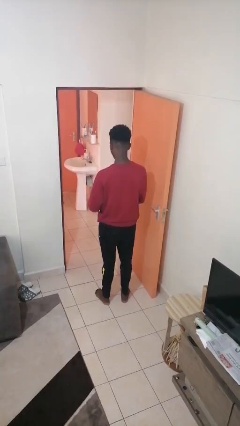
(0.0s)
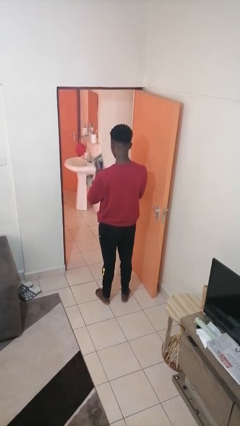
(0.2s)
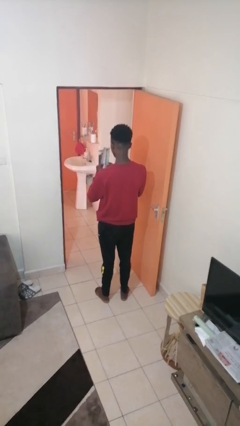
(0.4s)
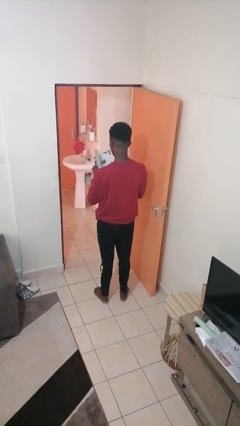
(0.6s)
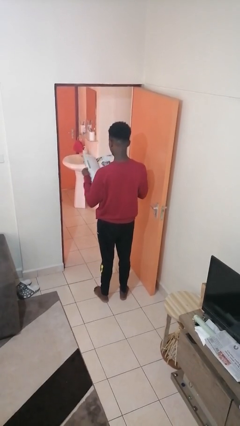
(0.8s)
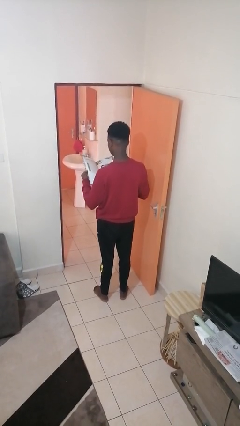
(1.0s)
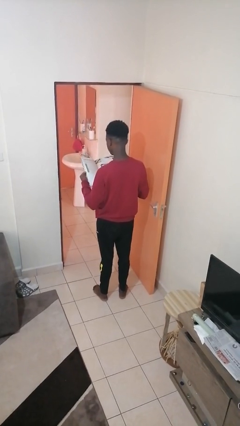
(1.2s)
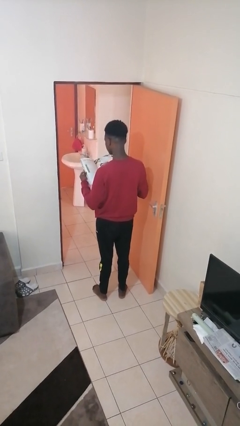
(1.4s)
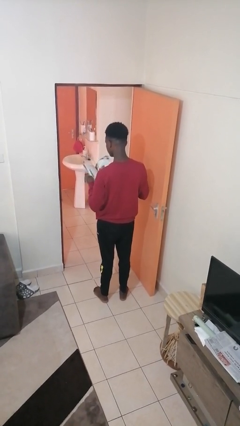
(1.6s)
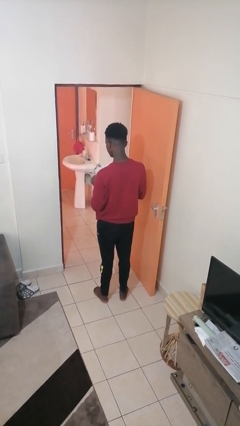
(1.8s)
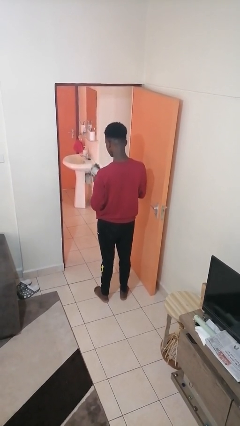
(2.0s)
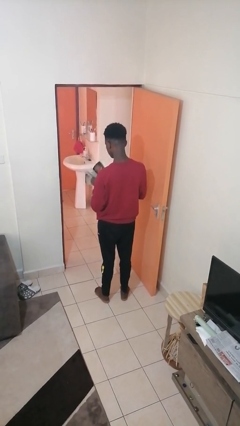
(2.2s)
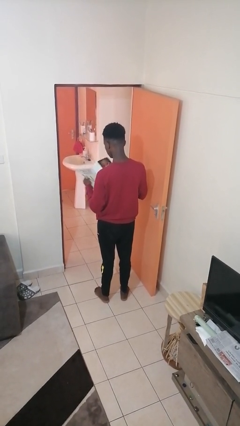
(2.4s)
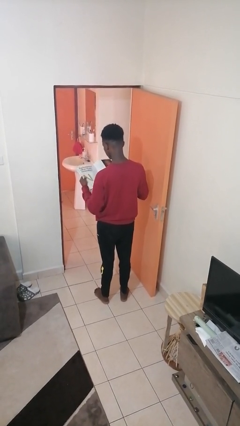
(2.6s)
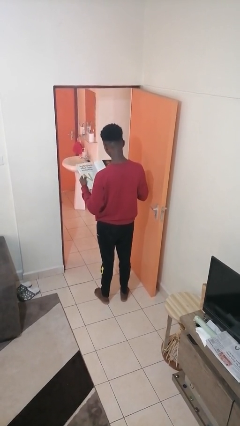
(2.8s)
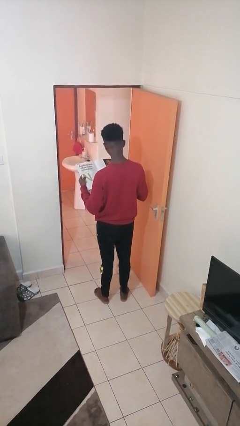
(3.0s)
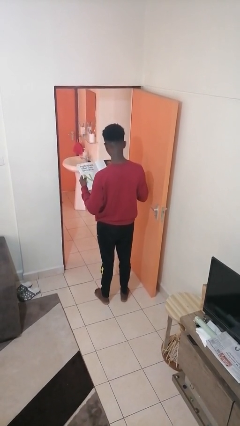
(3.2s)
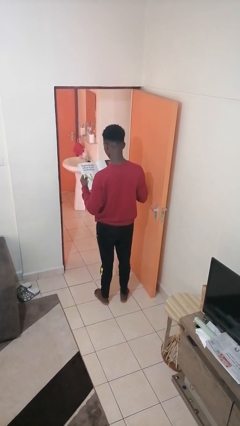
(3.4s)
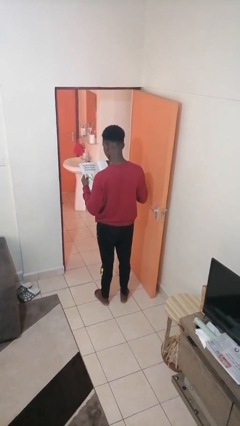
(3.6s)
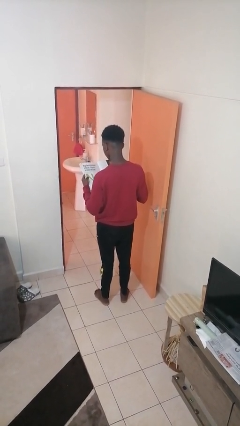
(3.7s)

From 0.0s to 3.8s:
person reads magazine

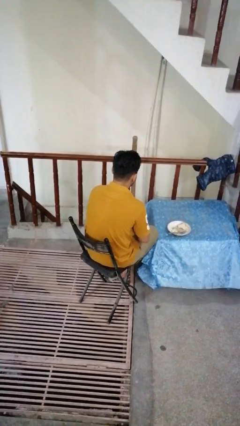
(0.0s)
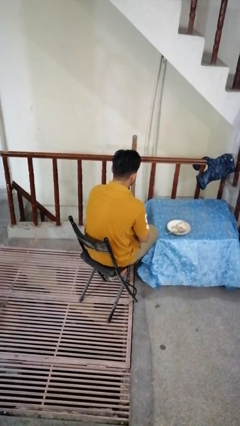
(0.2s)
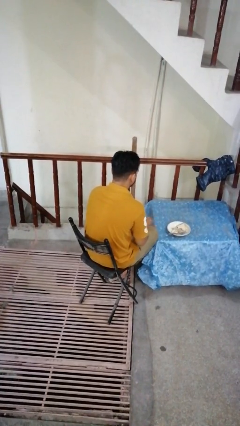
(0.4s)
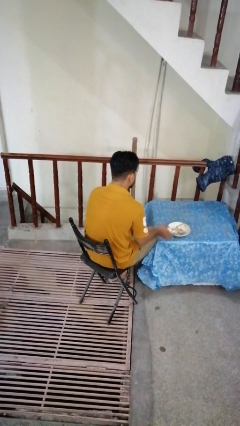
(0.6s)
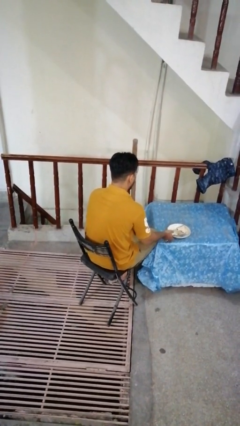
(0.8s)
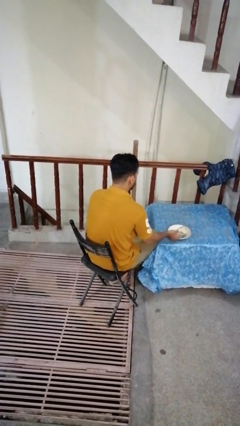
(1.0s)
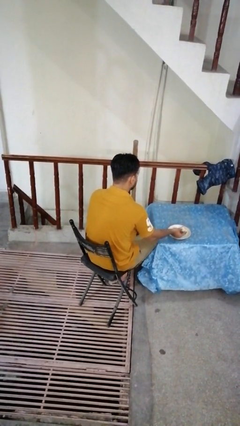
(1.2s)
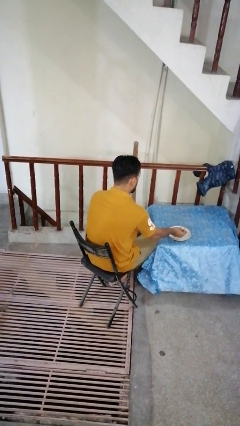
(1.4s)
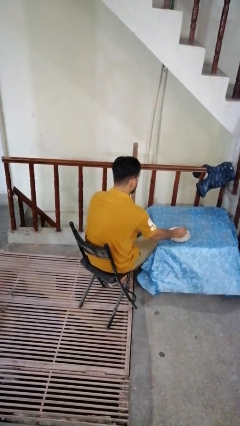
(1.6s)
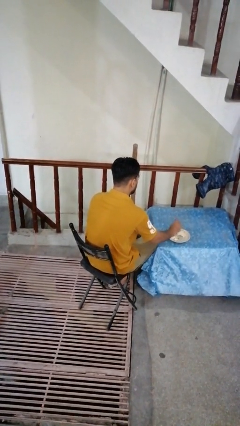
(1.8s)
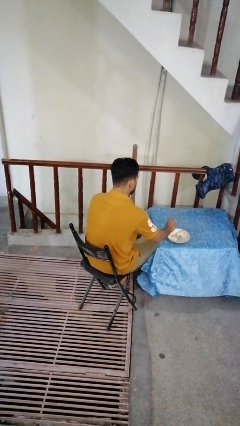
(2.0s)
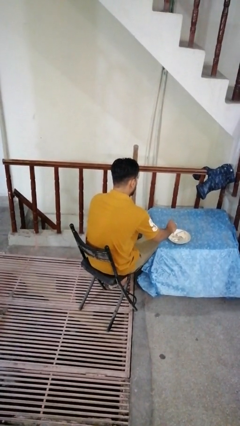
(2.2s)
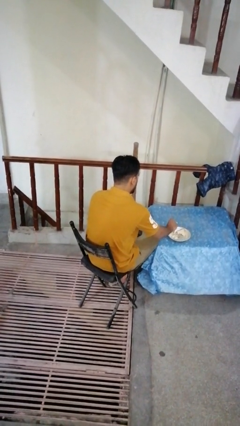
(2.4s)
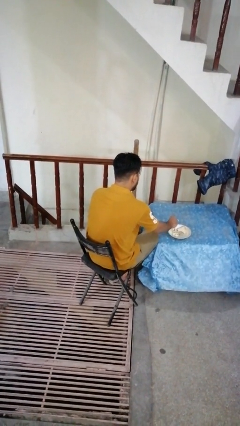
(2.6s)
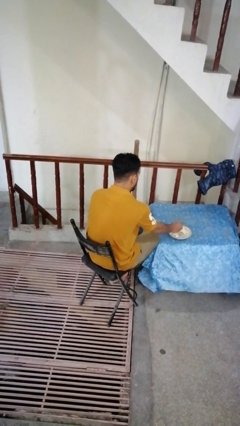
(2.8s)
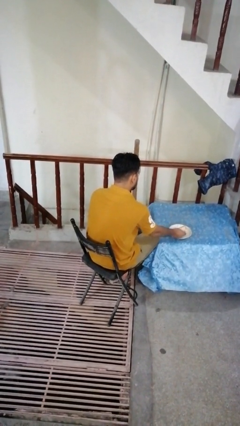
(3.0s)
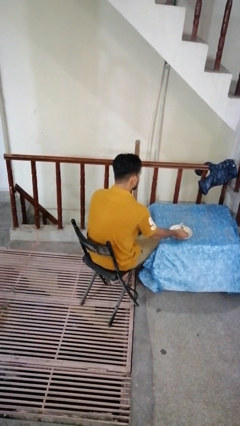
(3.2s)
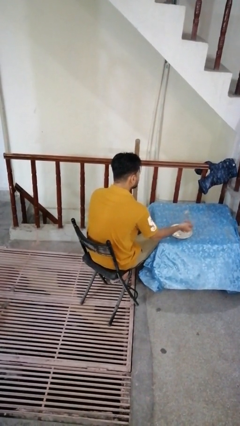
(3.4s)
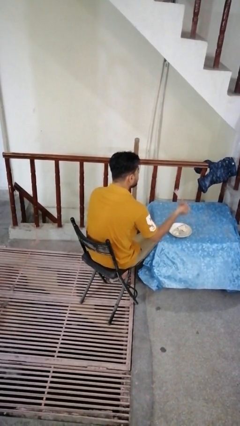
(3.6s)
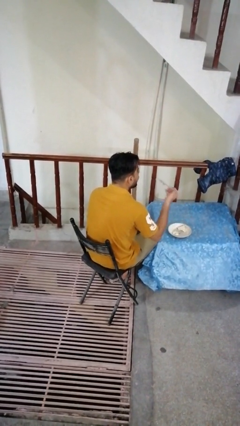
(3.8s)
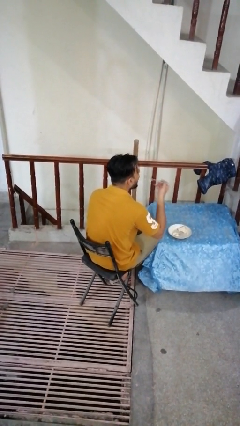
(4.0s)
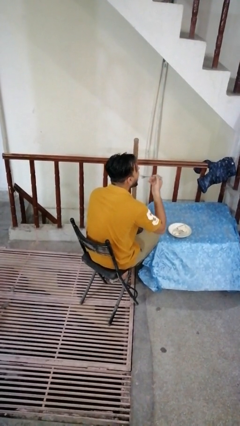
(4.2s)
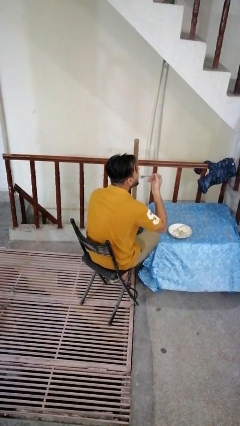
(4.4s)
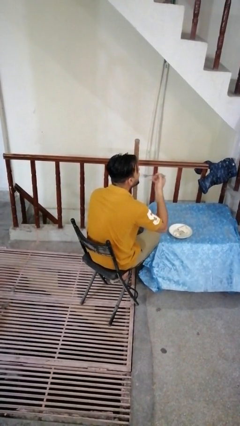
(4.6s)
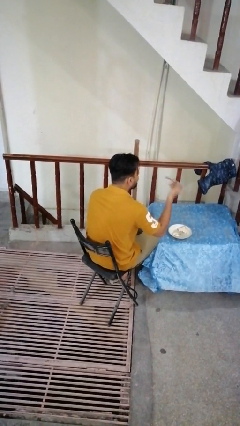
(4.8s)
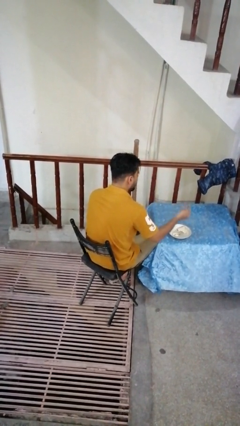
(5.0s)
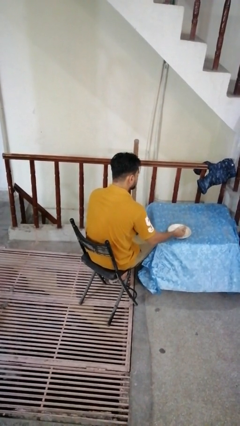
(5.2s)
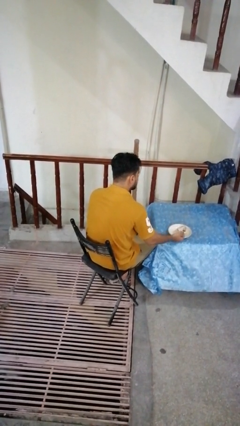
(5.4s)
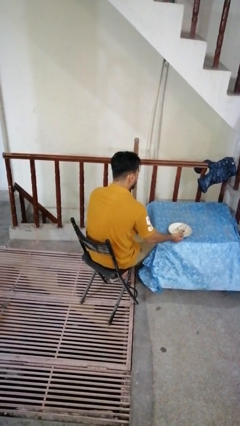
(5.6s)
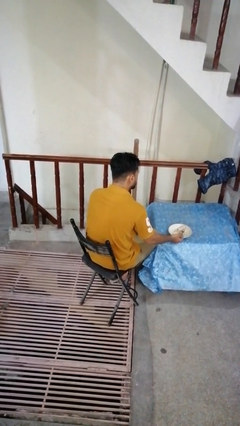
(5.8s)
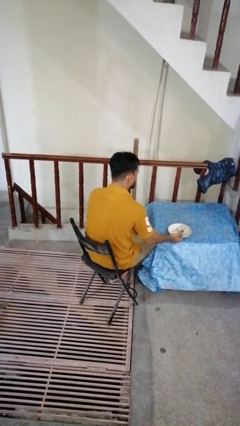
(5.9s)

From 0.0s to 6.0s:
person eats with utensil

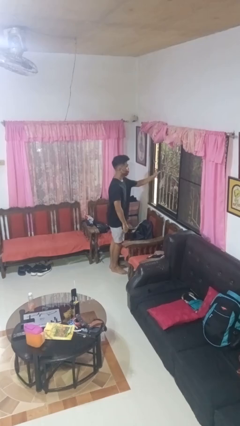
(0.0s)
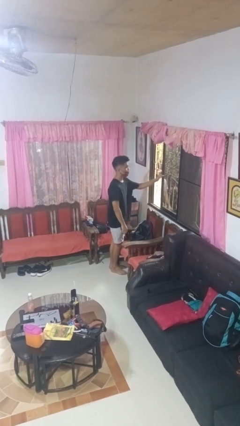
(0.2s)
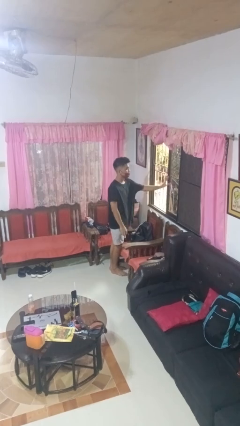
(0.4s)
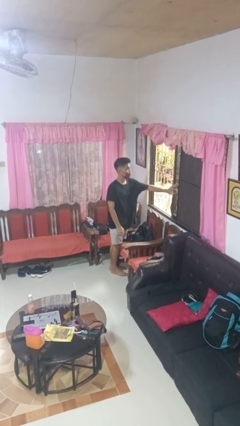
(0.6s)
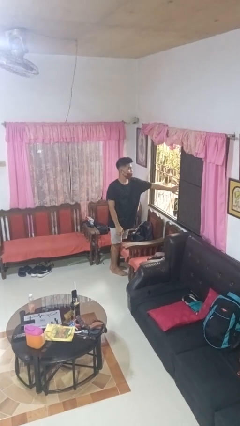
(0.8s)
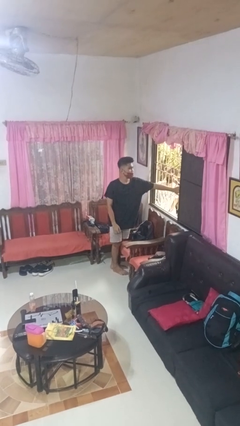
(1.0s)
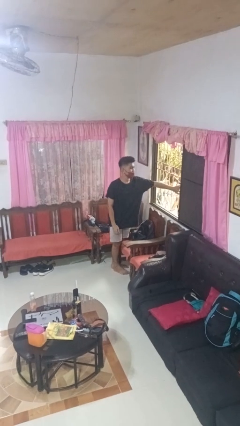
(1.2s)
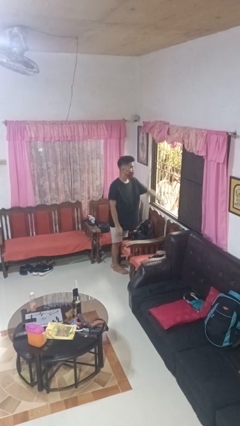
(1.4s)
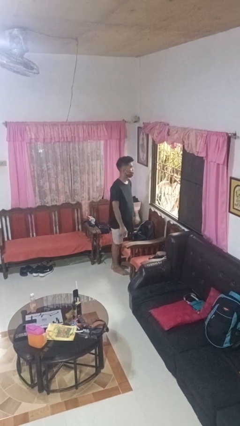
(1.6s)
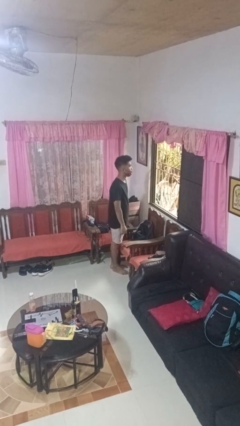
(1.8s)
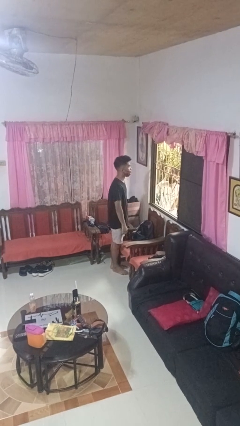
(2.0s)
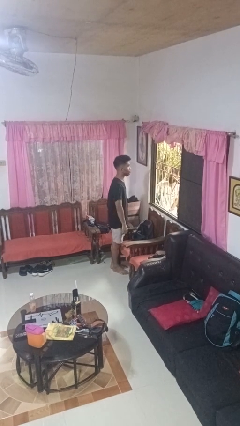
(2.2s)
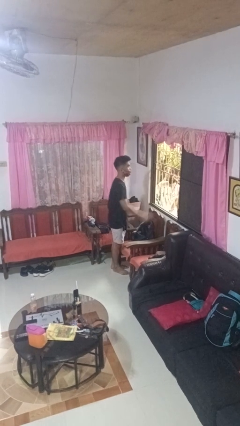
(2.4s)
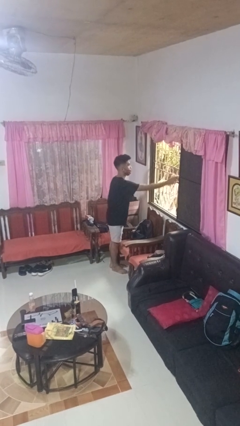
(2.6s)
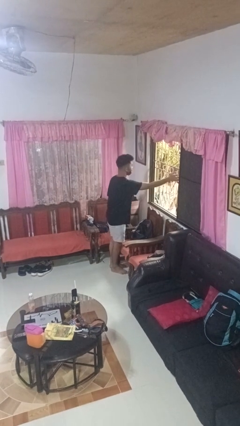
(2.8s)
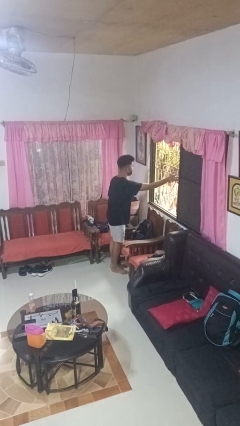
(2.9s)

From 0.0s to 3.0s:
person opens home window

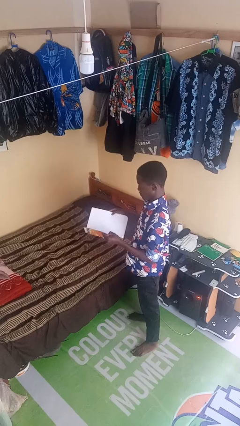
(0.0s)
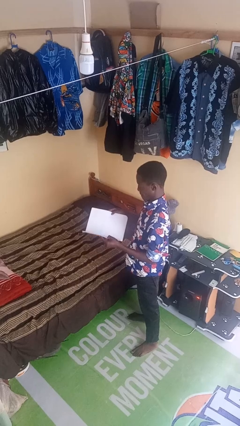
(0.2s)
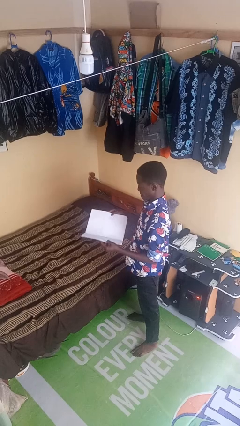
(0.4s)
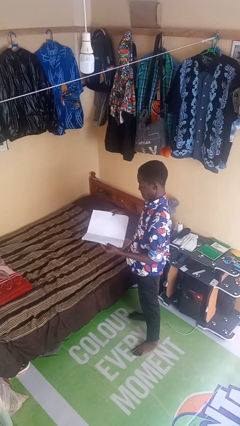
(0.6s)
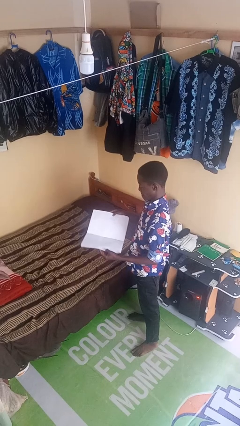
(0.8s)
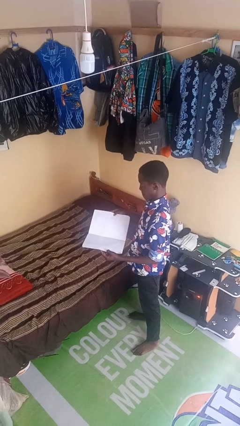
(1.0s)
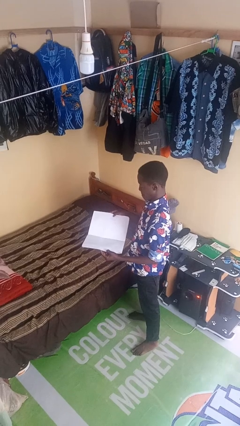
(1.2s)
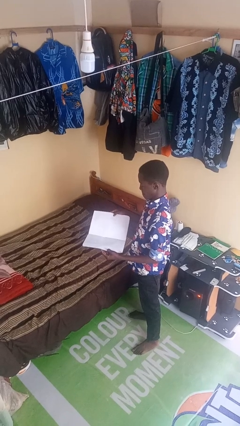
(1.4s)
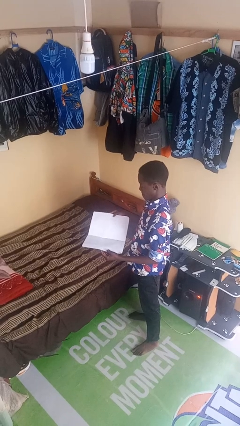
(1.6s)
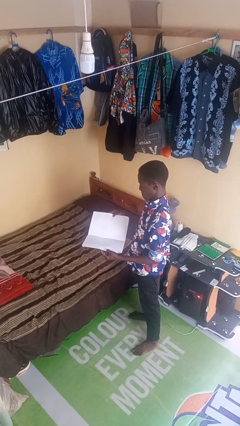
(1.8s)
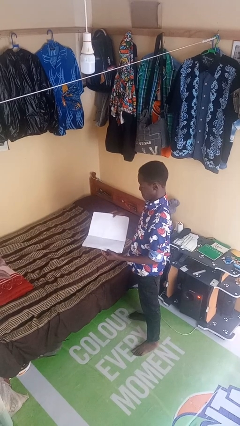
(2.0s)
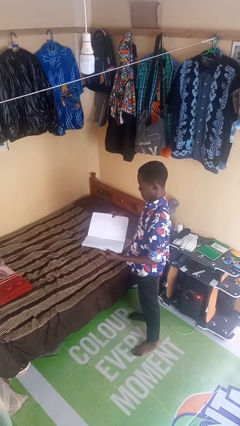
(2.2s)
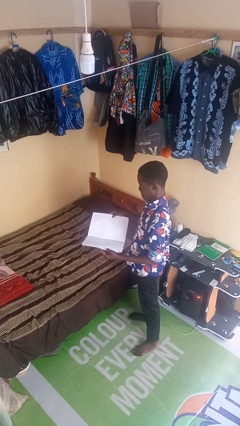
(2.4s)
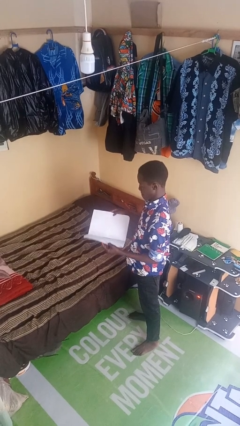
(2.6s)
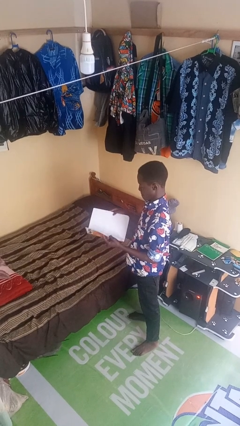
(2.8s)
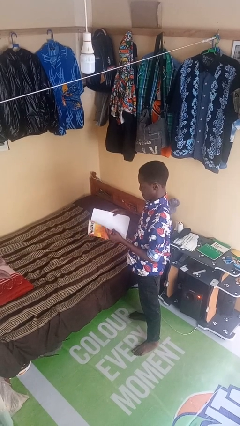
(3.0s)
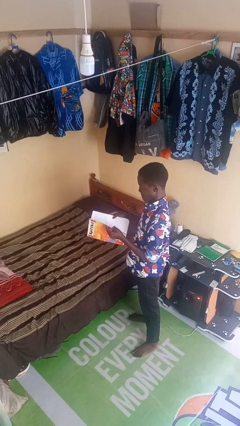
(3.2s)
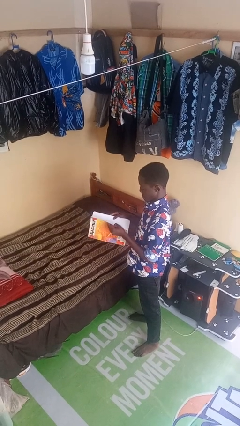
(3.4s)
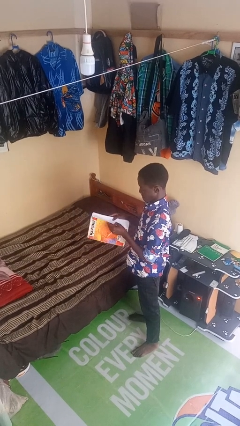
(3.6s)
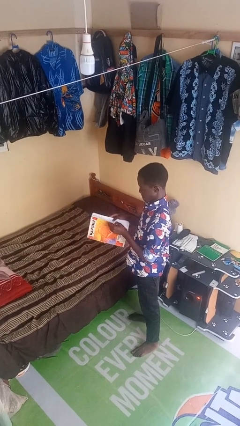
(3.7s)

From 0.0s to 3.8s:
person reads book

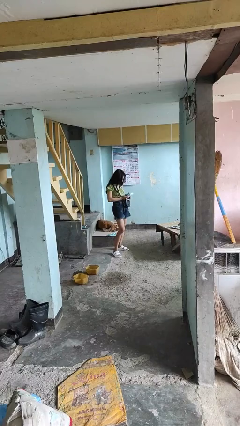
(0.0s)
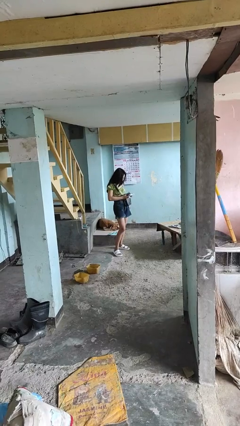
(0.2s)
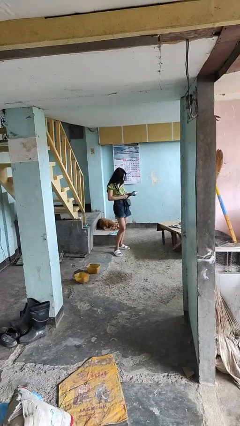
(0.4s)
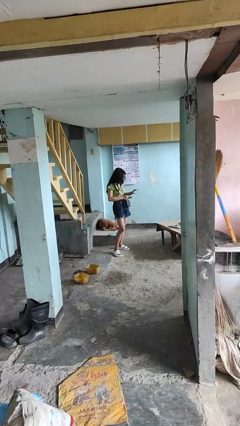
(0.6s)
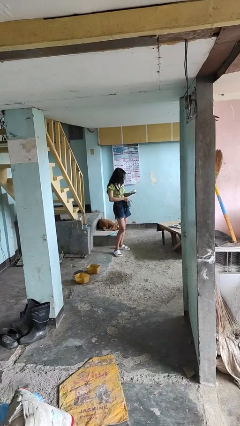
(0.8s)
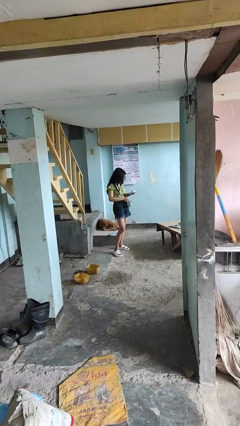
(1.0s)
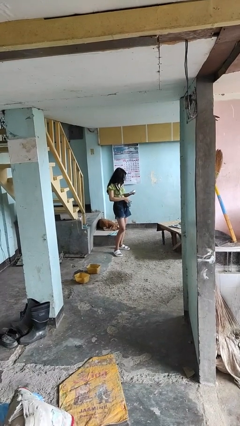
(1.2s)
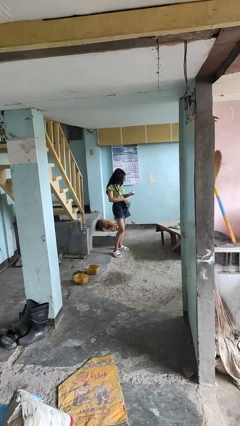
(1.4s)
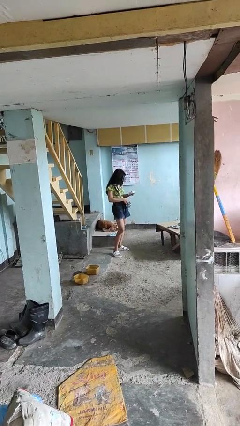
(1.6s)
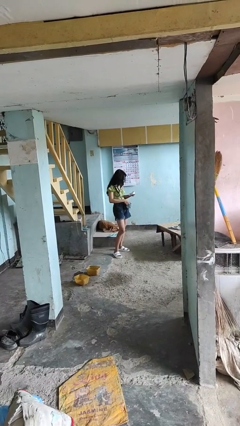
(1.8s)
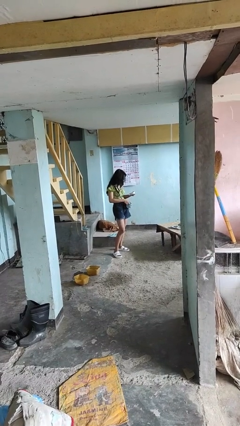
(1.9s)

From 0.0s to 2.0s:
person takes object from purse
